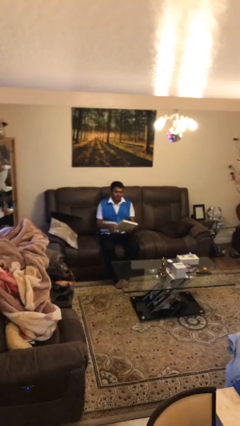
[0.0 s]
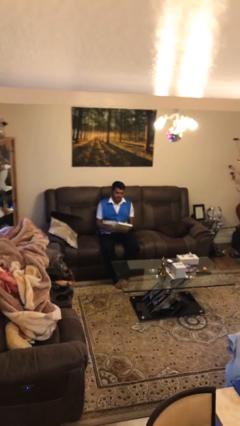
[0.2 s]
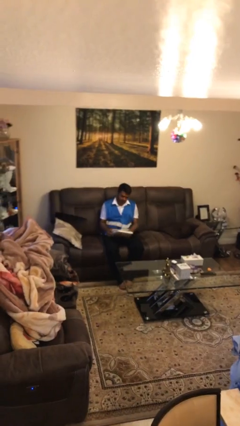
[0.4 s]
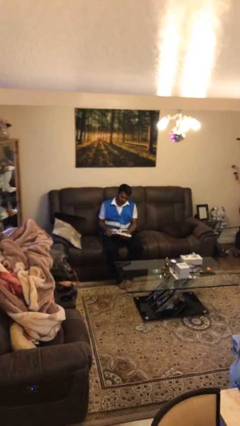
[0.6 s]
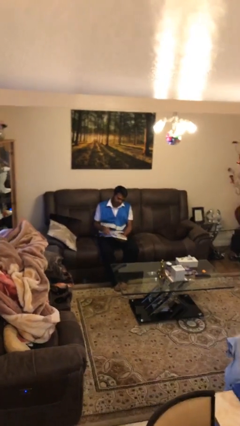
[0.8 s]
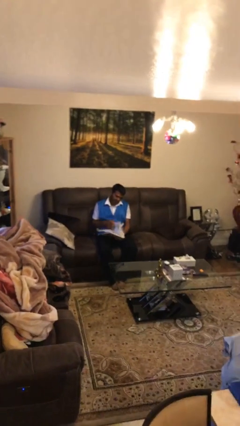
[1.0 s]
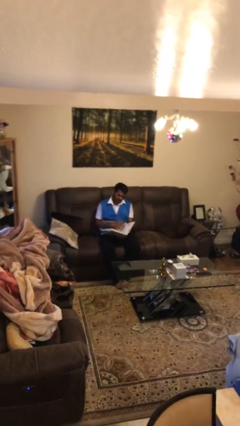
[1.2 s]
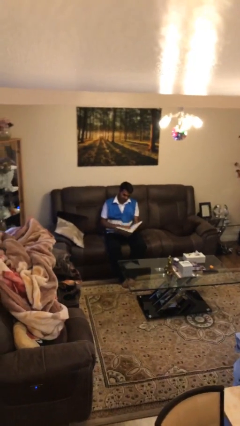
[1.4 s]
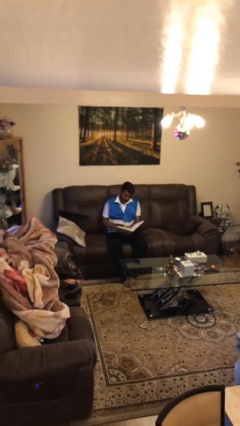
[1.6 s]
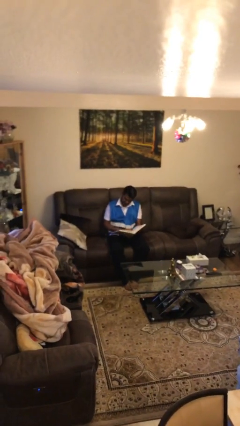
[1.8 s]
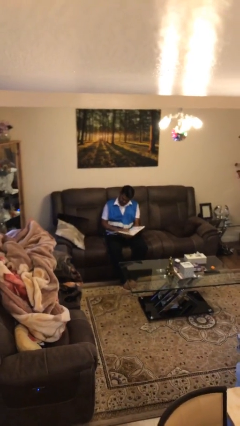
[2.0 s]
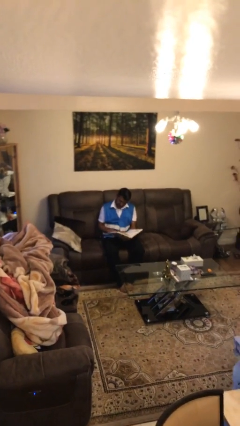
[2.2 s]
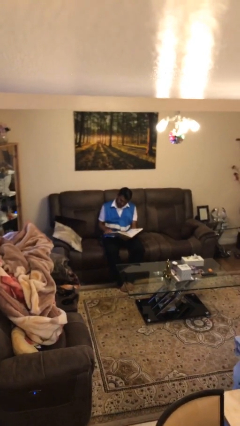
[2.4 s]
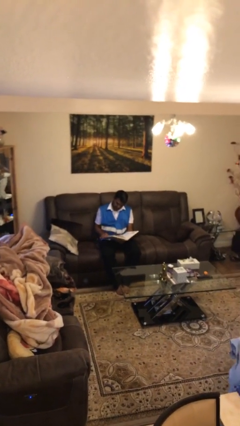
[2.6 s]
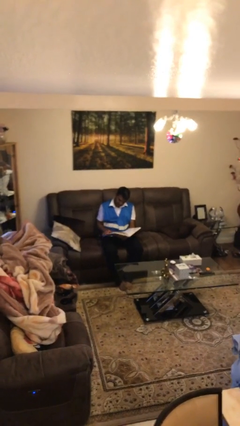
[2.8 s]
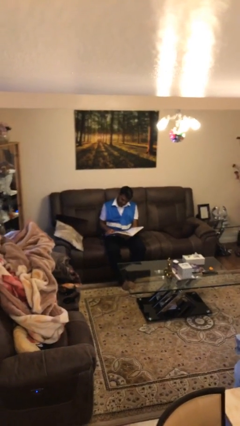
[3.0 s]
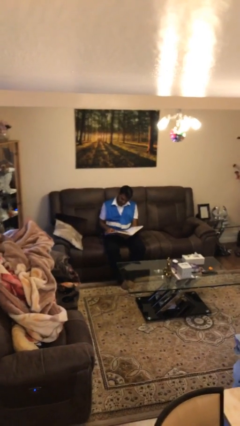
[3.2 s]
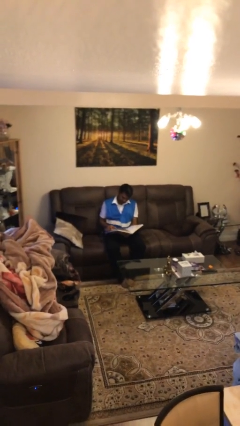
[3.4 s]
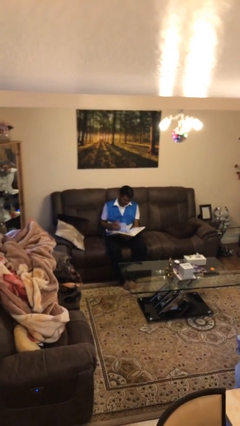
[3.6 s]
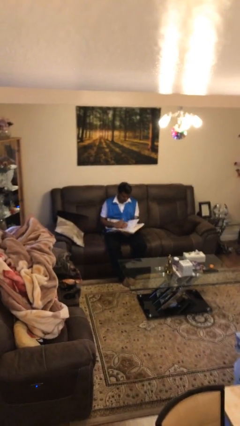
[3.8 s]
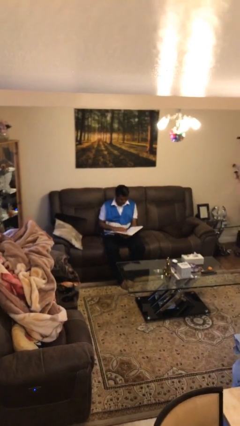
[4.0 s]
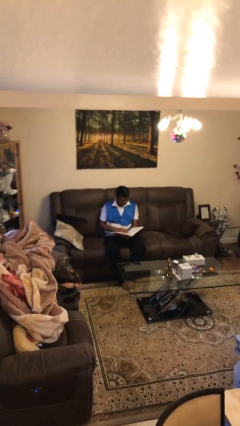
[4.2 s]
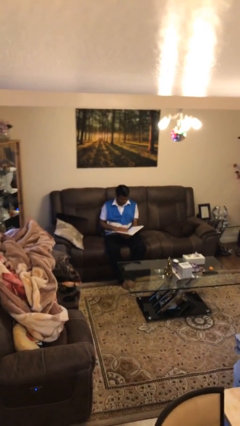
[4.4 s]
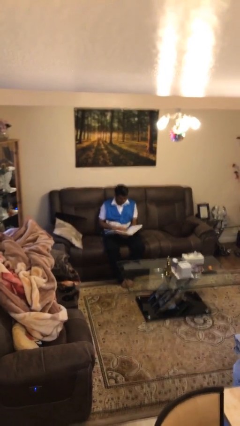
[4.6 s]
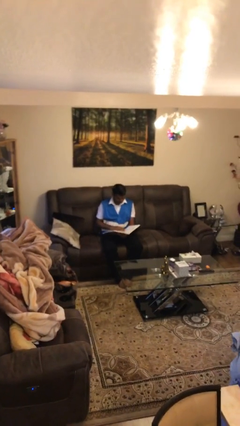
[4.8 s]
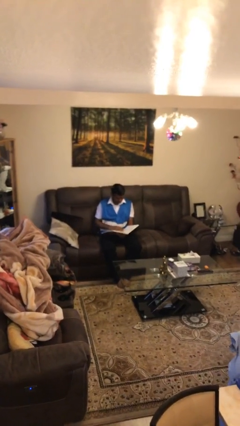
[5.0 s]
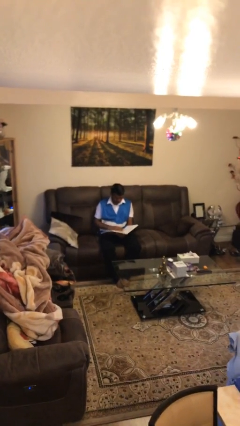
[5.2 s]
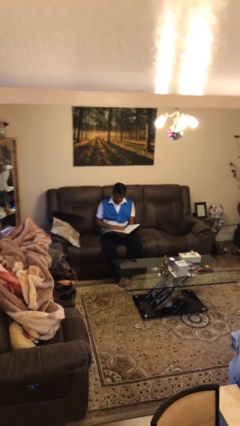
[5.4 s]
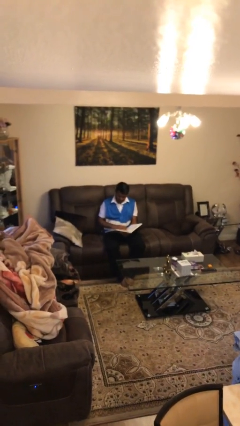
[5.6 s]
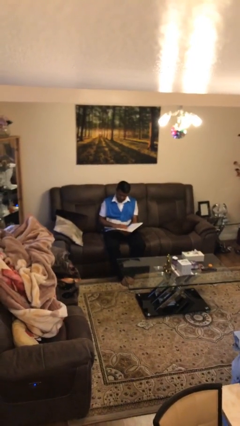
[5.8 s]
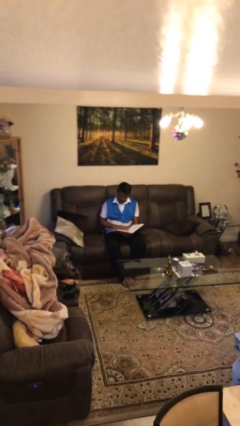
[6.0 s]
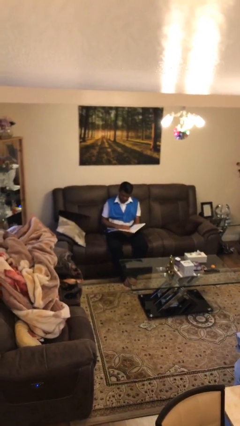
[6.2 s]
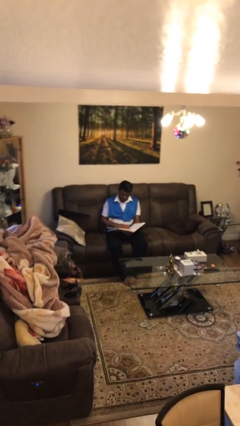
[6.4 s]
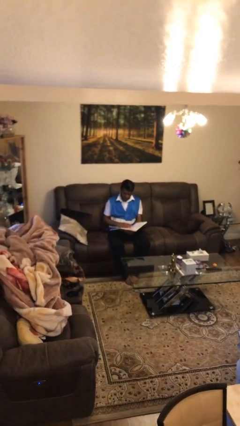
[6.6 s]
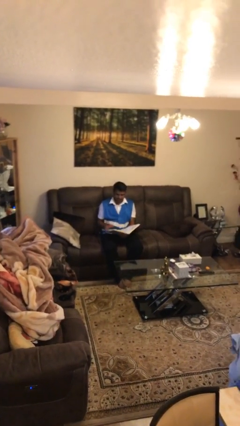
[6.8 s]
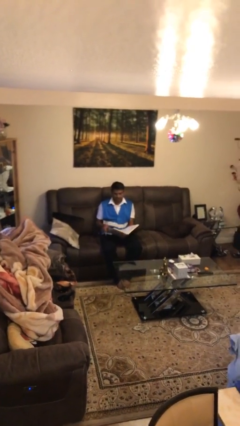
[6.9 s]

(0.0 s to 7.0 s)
person reads document

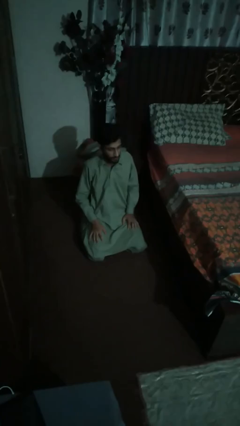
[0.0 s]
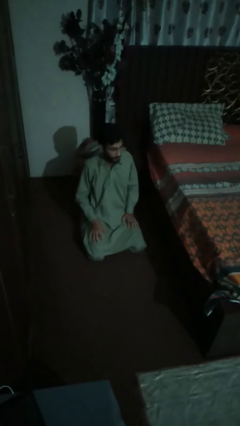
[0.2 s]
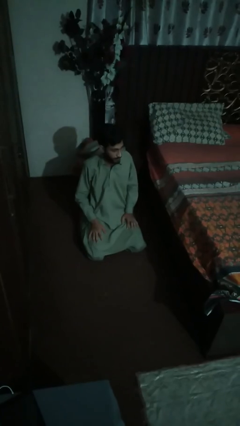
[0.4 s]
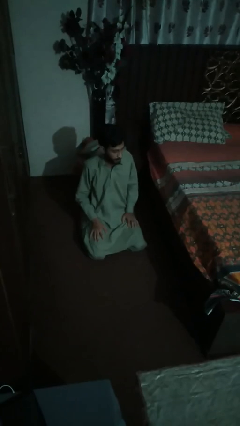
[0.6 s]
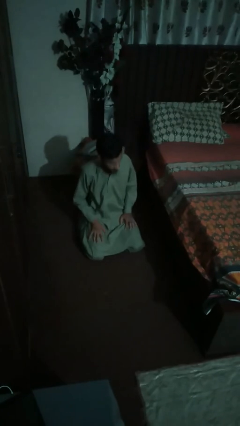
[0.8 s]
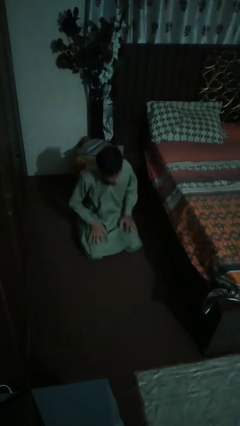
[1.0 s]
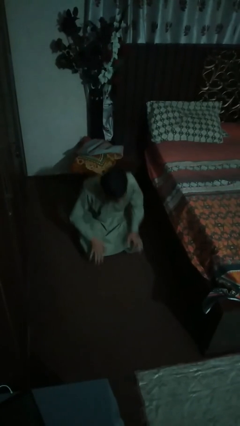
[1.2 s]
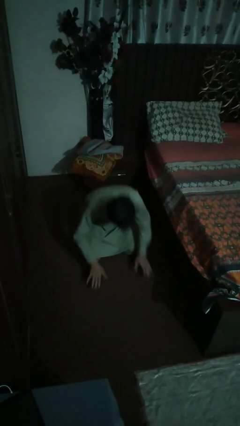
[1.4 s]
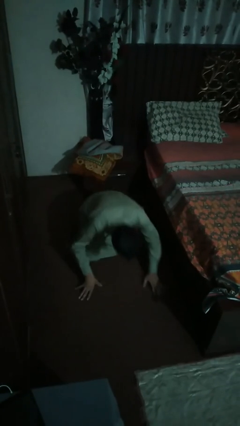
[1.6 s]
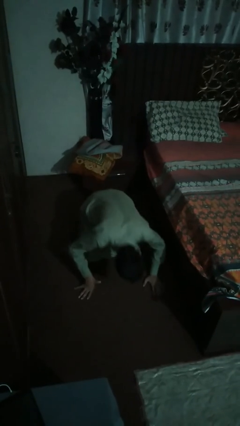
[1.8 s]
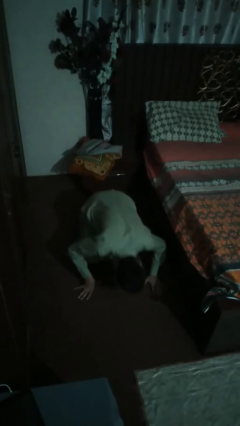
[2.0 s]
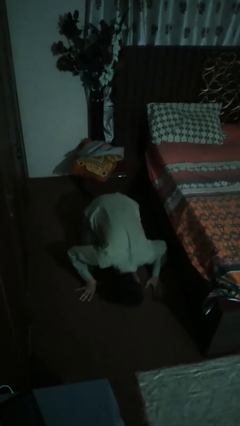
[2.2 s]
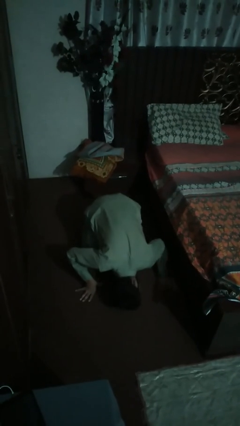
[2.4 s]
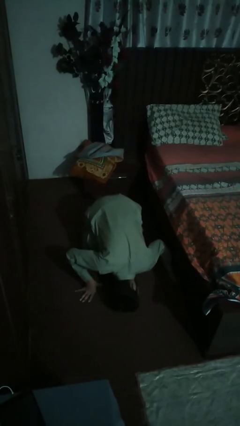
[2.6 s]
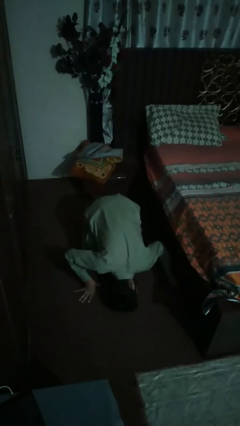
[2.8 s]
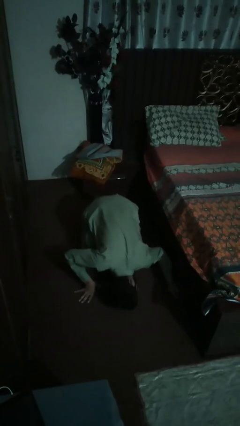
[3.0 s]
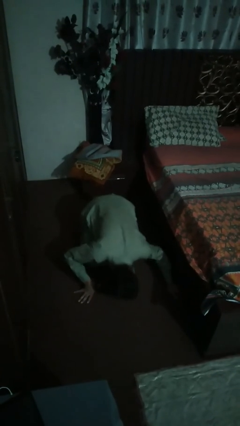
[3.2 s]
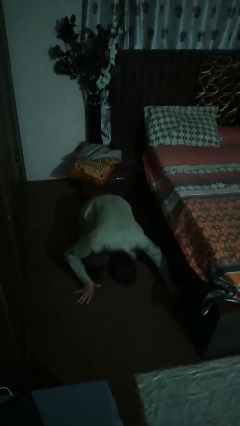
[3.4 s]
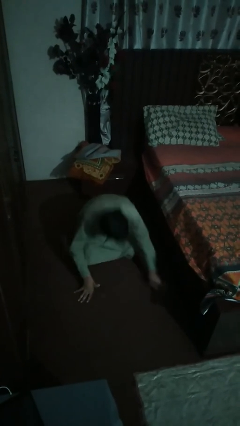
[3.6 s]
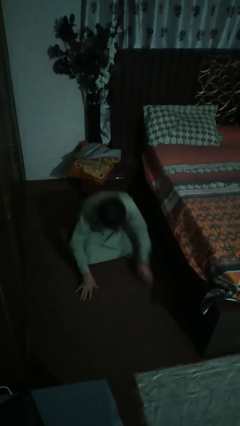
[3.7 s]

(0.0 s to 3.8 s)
person searches under bed

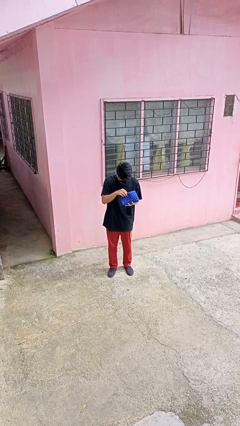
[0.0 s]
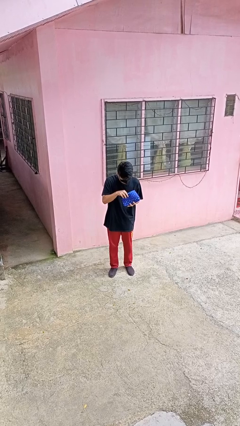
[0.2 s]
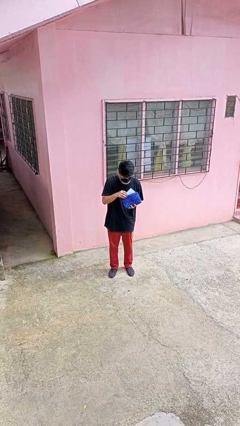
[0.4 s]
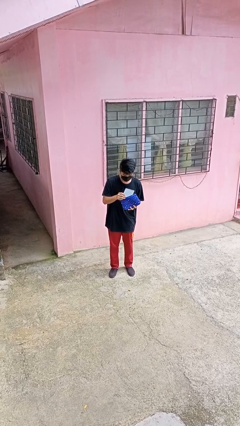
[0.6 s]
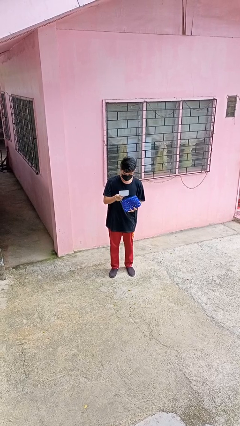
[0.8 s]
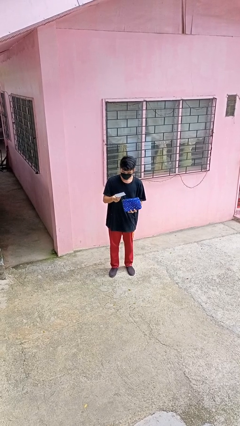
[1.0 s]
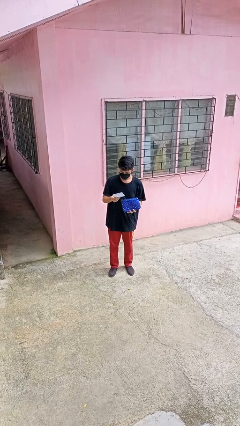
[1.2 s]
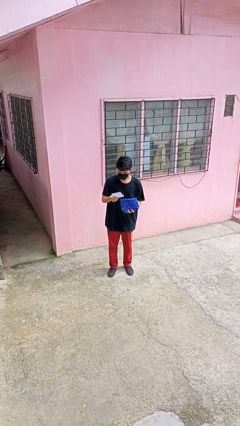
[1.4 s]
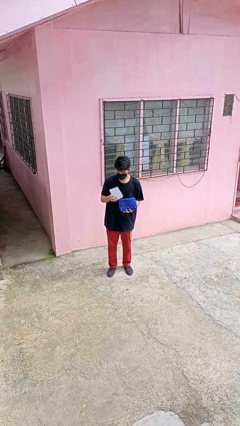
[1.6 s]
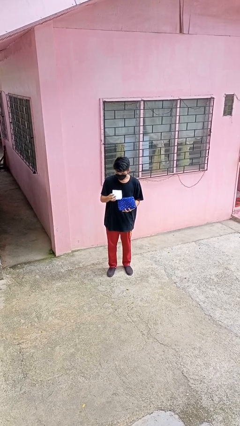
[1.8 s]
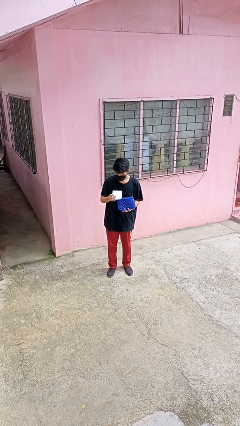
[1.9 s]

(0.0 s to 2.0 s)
person takes object from purse

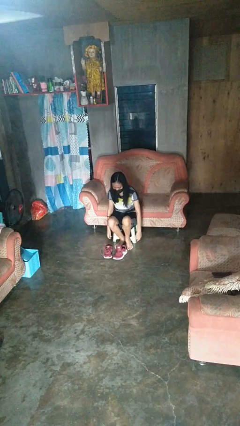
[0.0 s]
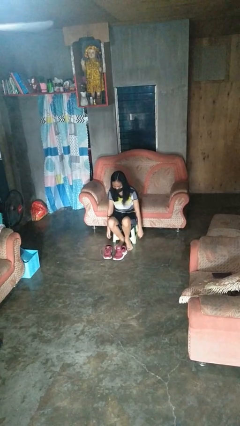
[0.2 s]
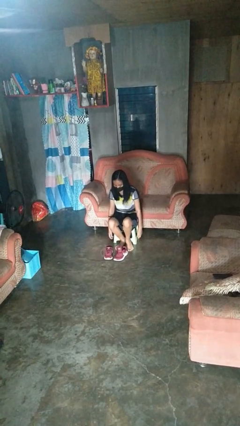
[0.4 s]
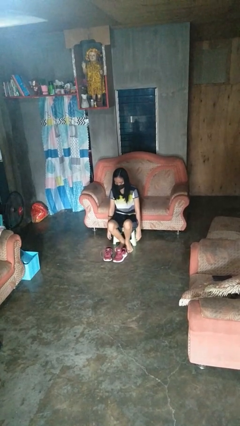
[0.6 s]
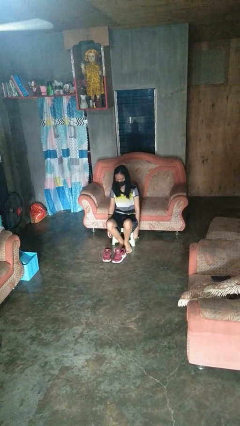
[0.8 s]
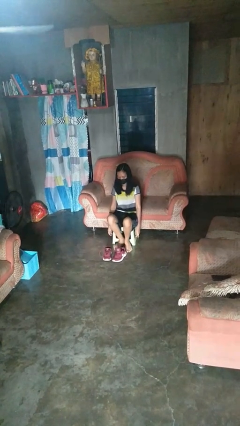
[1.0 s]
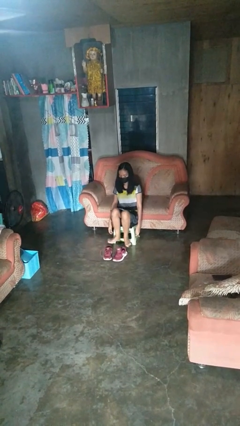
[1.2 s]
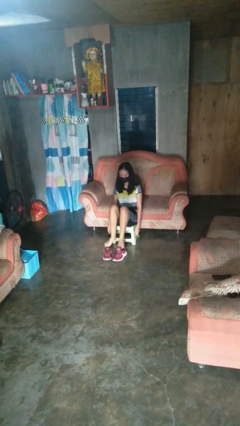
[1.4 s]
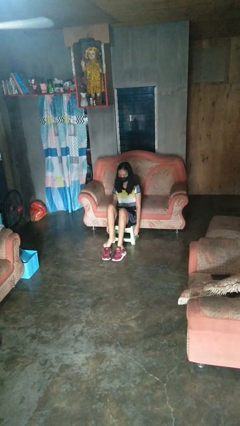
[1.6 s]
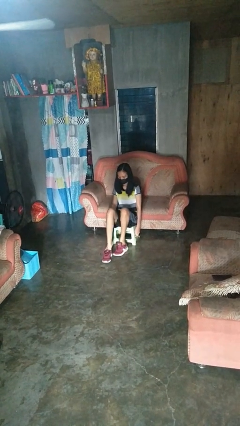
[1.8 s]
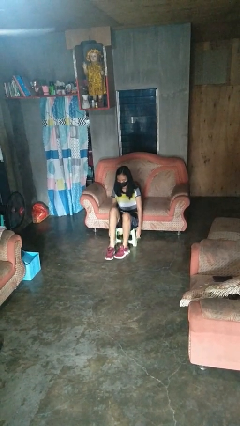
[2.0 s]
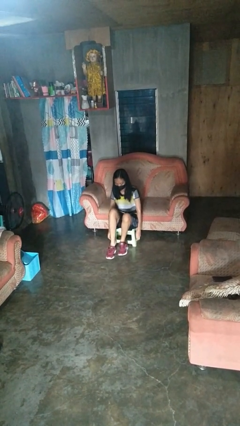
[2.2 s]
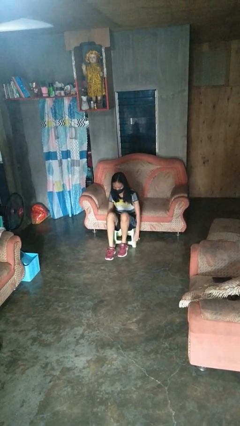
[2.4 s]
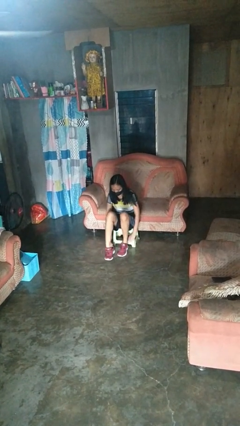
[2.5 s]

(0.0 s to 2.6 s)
person puts on shoes

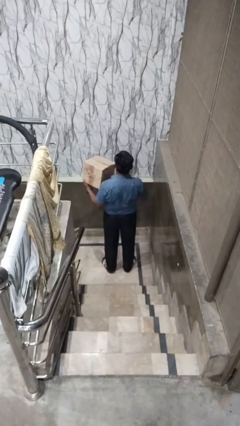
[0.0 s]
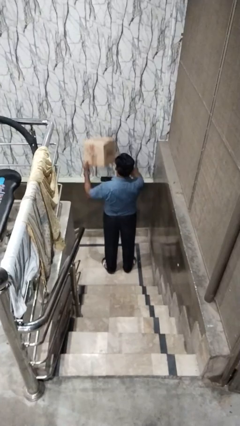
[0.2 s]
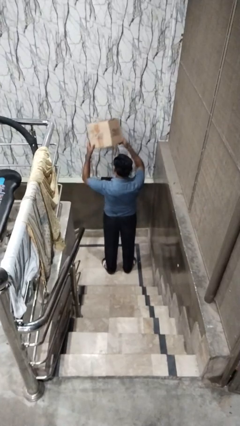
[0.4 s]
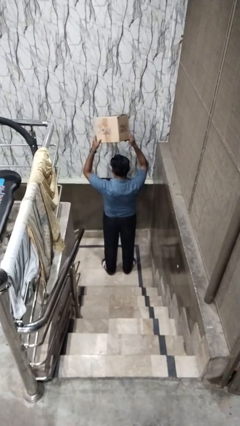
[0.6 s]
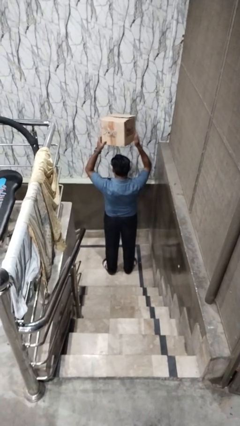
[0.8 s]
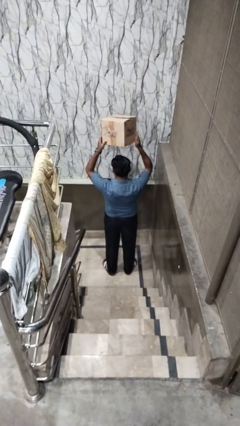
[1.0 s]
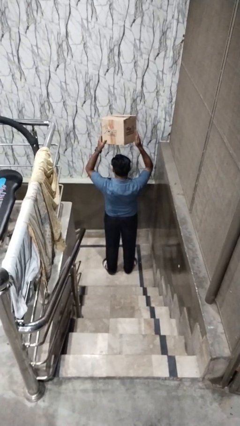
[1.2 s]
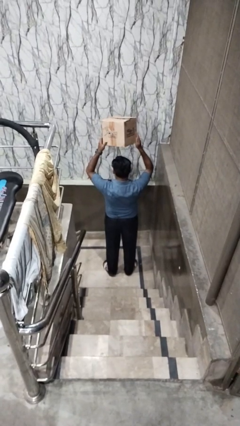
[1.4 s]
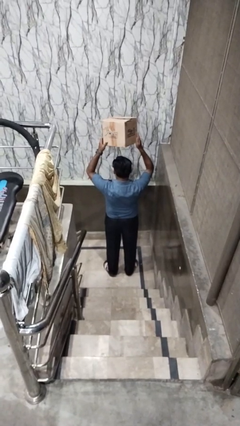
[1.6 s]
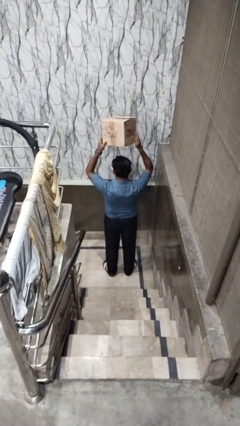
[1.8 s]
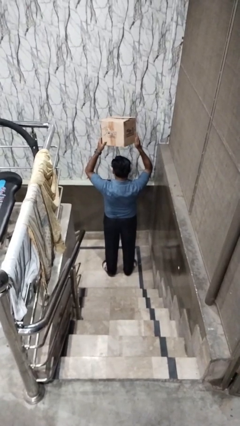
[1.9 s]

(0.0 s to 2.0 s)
person holds object above head
